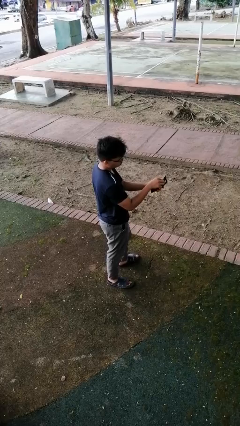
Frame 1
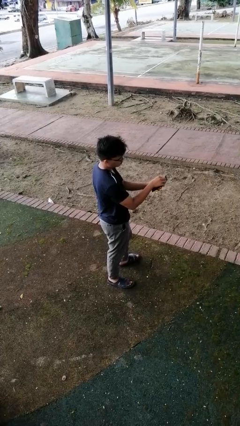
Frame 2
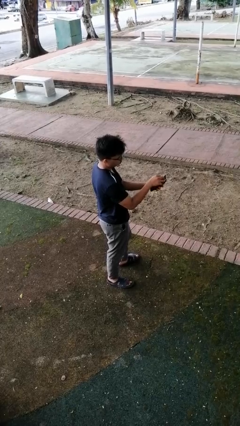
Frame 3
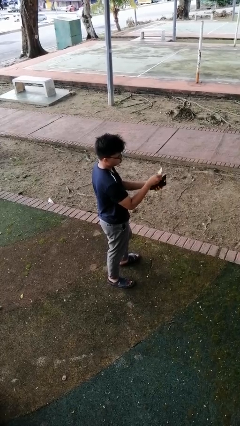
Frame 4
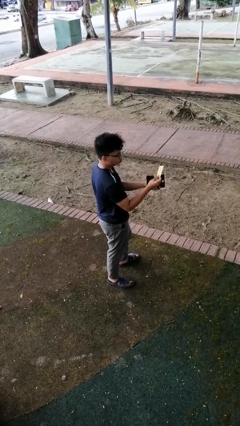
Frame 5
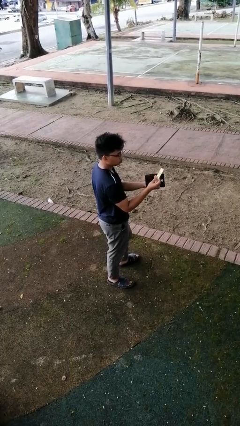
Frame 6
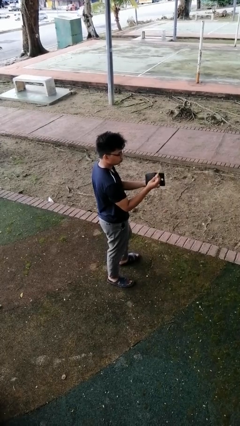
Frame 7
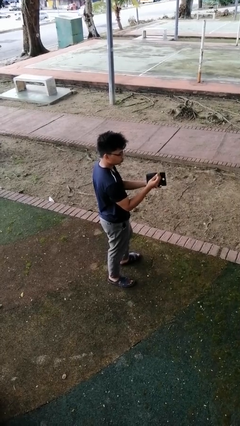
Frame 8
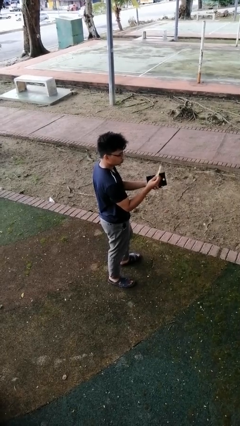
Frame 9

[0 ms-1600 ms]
person takes object from purse

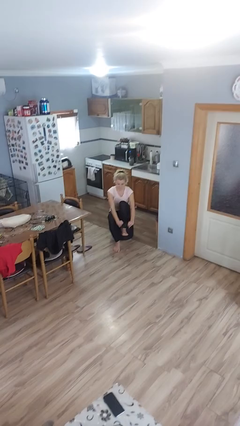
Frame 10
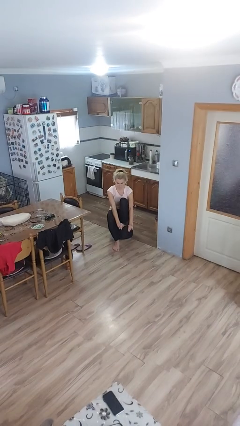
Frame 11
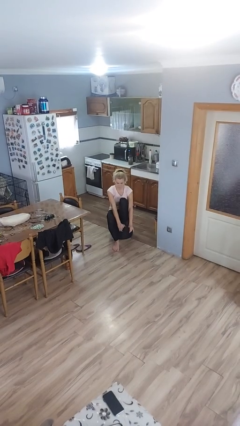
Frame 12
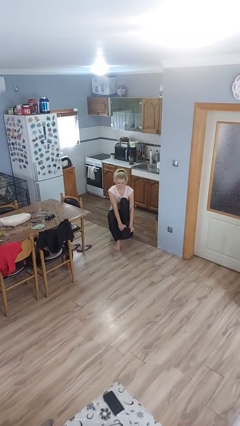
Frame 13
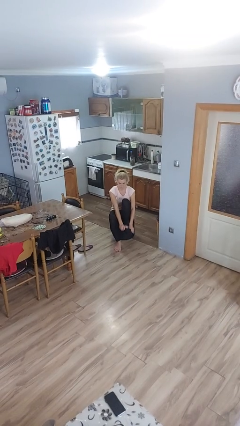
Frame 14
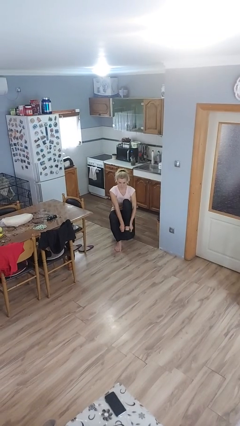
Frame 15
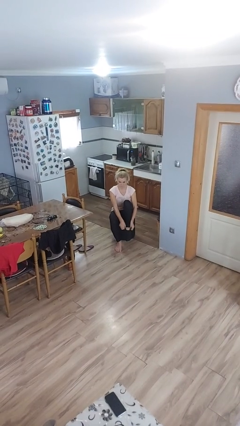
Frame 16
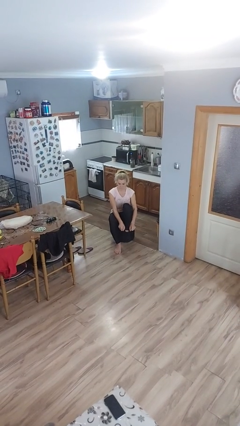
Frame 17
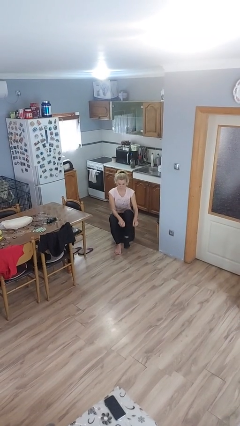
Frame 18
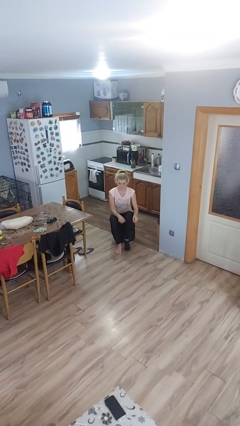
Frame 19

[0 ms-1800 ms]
person puts on socks

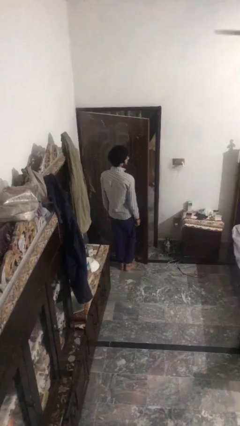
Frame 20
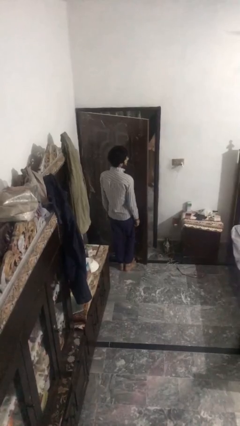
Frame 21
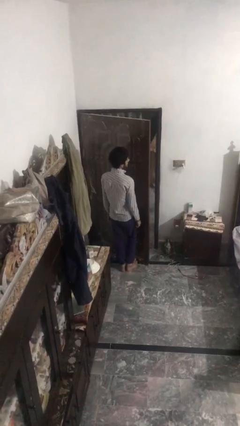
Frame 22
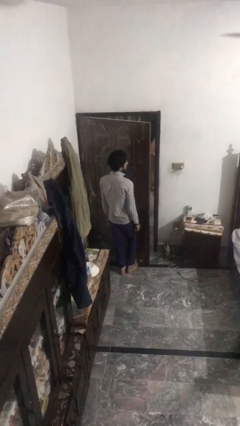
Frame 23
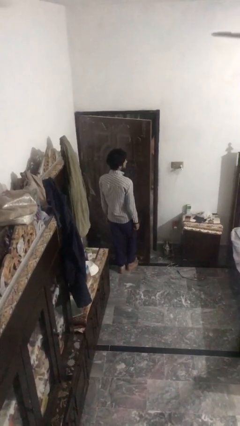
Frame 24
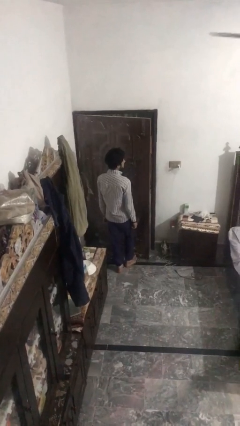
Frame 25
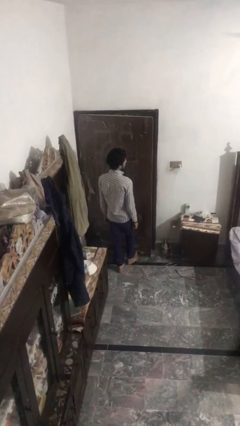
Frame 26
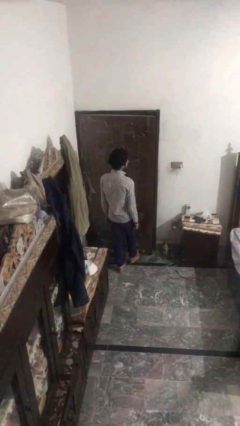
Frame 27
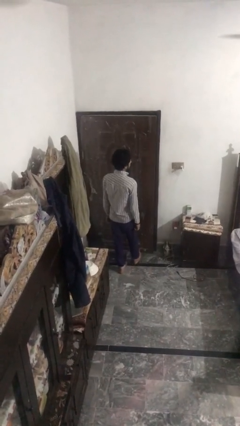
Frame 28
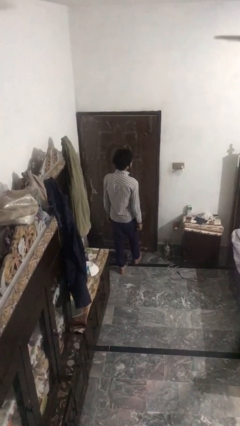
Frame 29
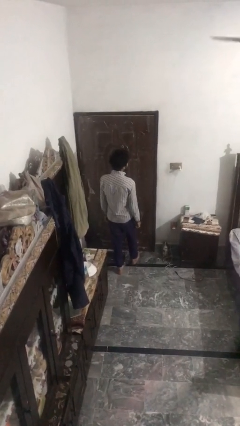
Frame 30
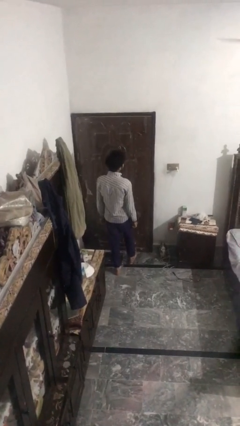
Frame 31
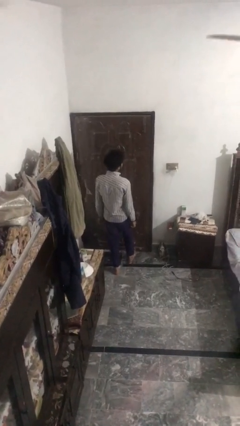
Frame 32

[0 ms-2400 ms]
person closes door with foot

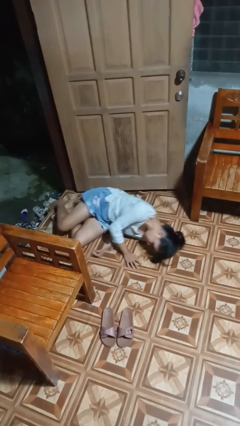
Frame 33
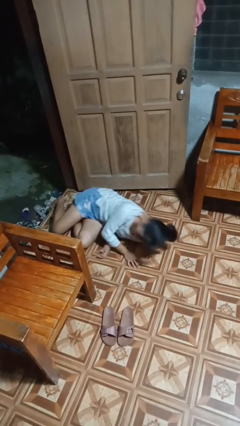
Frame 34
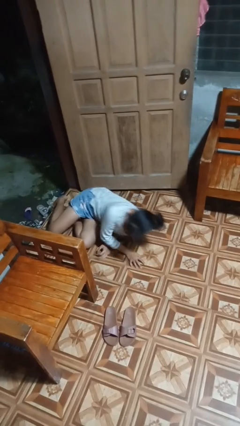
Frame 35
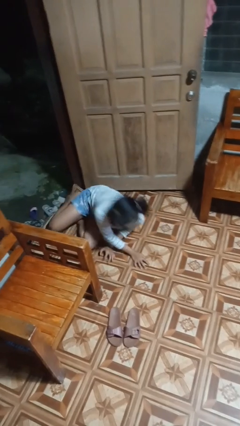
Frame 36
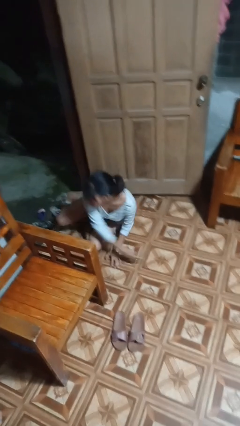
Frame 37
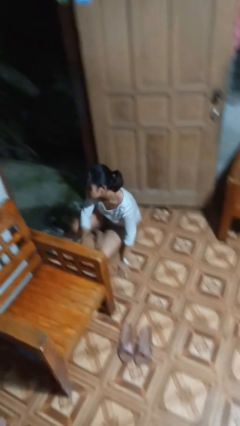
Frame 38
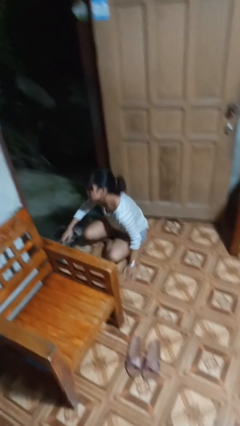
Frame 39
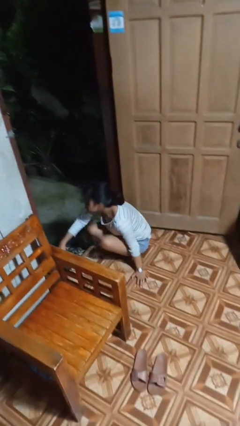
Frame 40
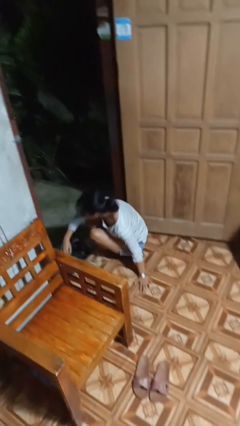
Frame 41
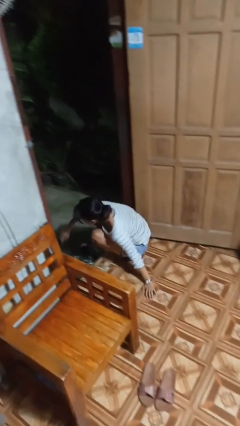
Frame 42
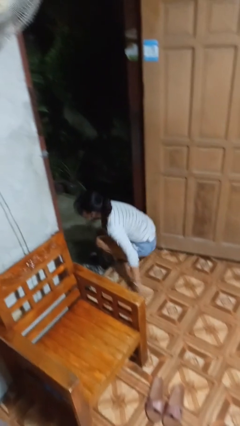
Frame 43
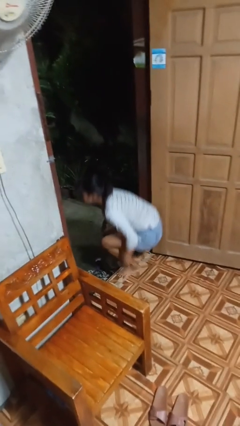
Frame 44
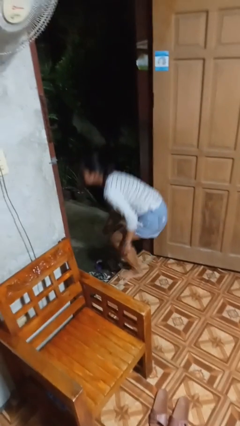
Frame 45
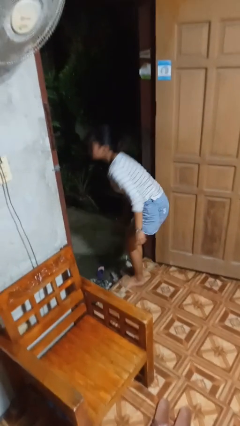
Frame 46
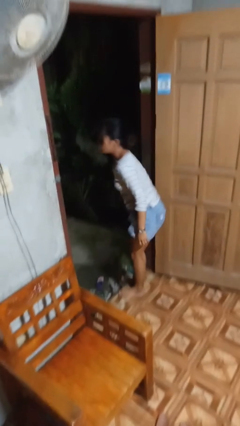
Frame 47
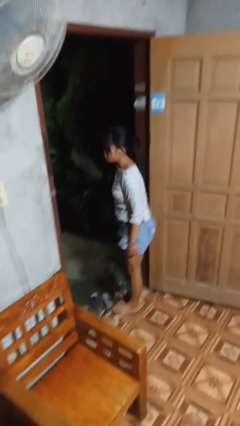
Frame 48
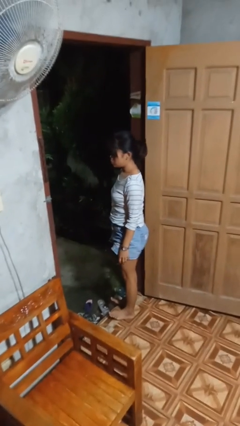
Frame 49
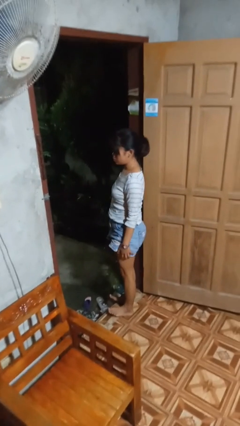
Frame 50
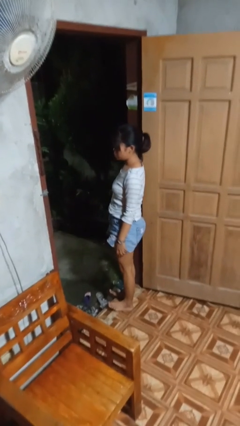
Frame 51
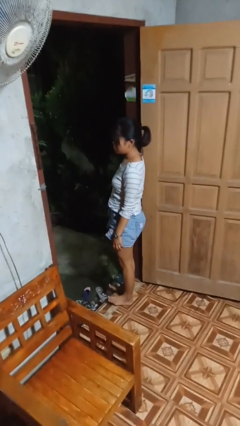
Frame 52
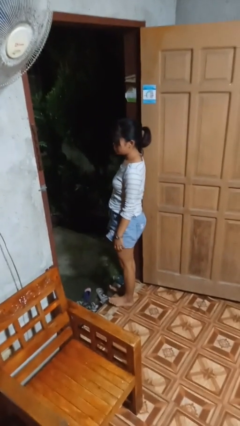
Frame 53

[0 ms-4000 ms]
person stands up from floor

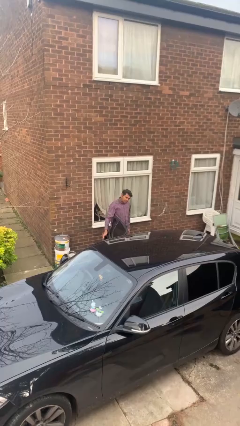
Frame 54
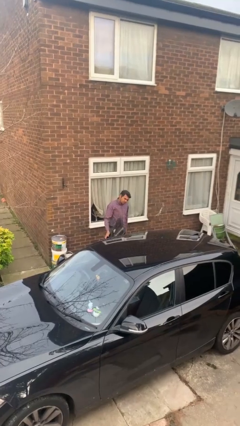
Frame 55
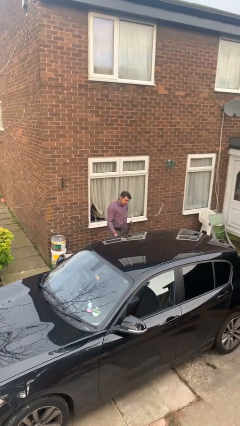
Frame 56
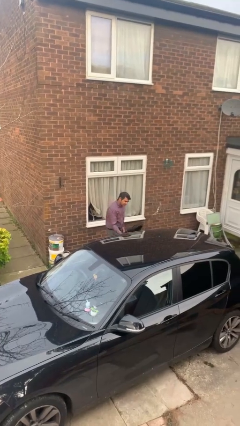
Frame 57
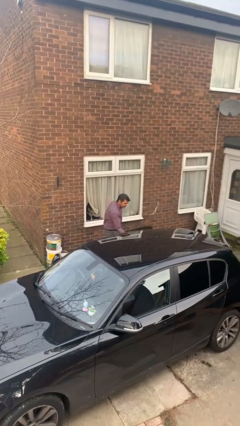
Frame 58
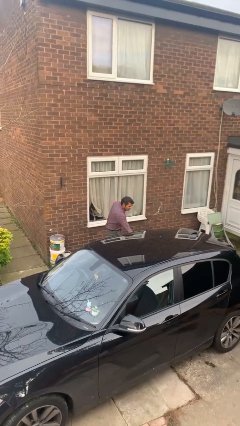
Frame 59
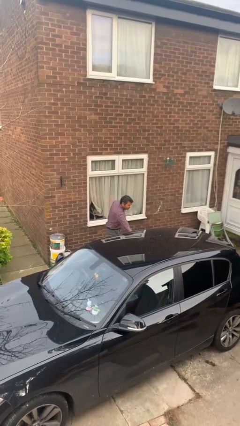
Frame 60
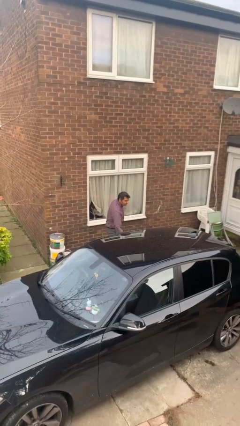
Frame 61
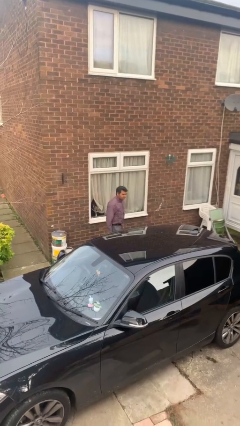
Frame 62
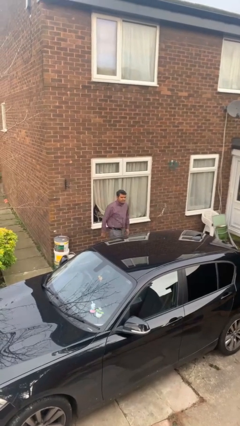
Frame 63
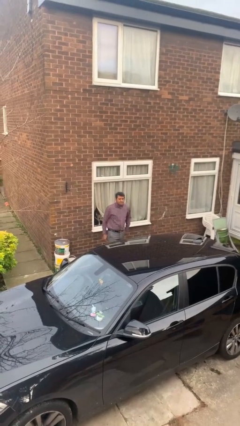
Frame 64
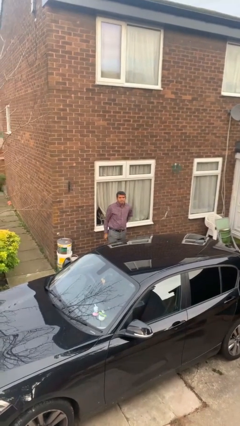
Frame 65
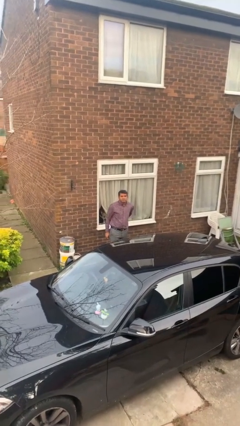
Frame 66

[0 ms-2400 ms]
person closes car door

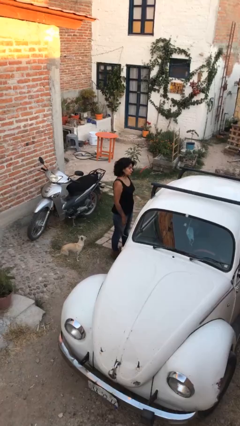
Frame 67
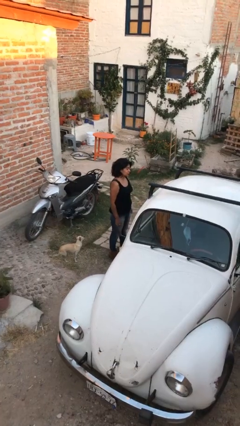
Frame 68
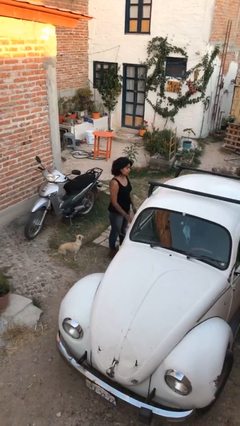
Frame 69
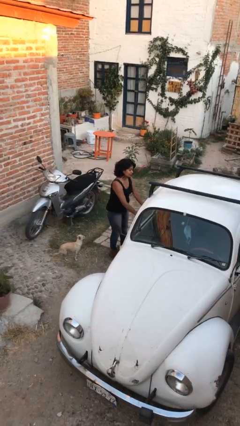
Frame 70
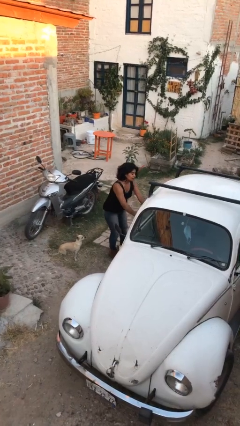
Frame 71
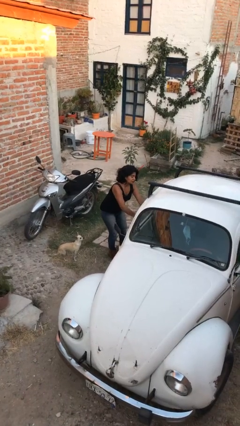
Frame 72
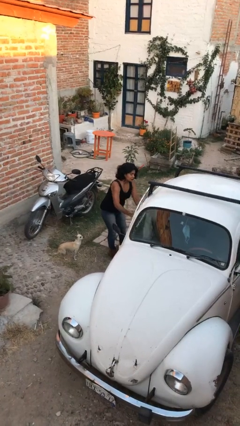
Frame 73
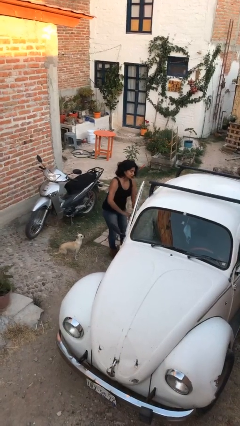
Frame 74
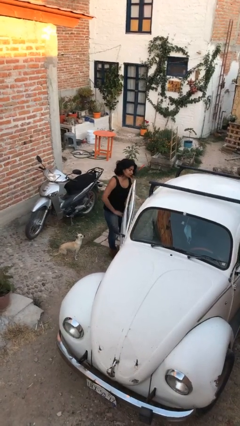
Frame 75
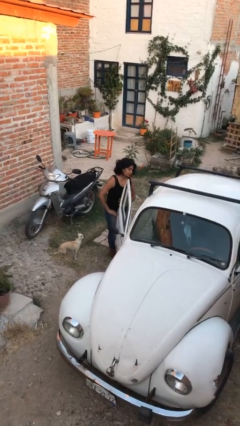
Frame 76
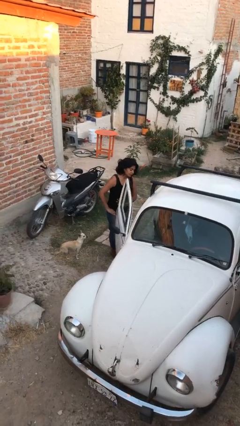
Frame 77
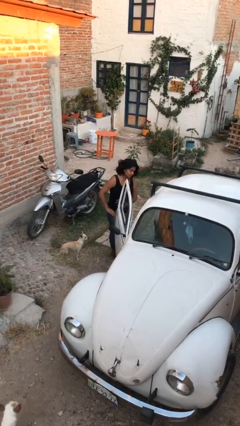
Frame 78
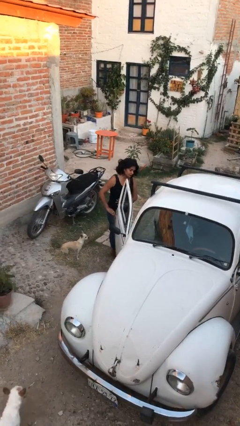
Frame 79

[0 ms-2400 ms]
person opens car door

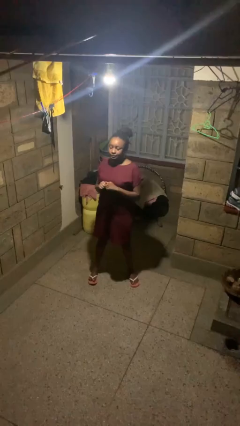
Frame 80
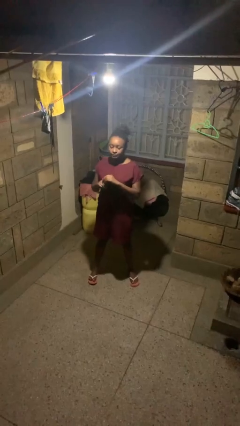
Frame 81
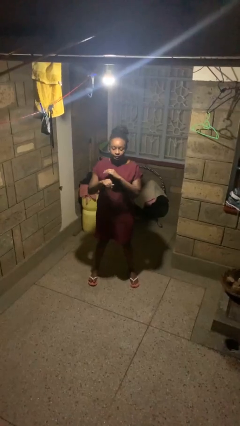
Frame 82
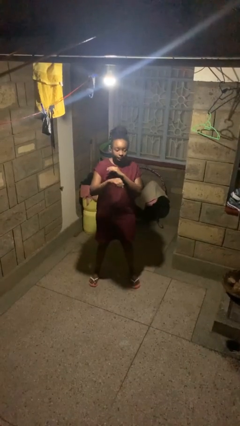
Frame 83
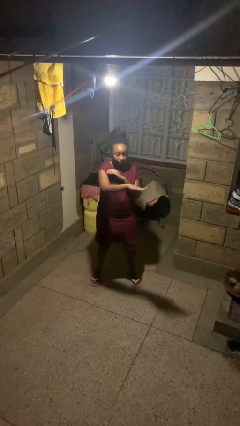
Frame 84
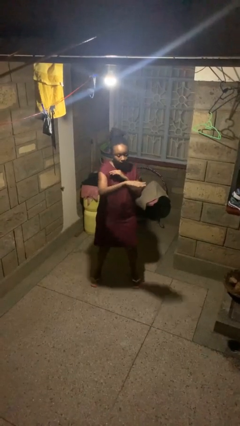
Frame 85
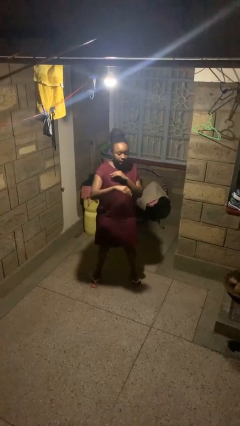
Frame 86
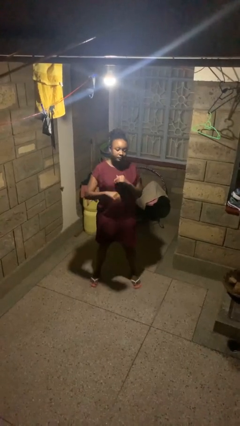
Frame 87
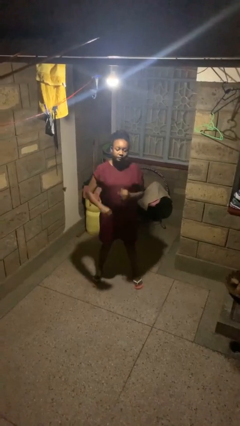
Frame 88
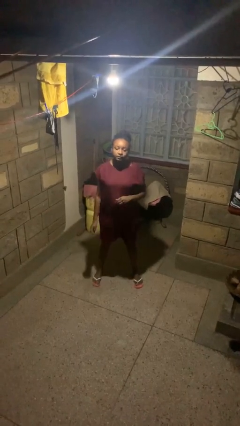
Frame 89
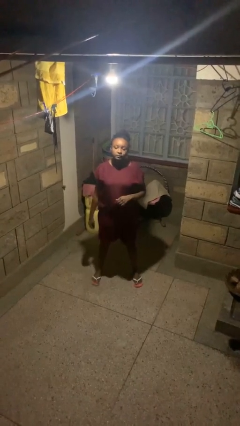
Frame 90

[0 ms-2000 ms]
person karate chop

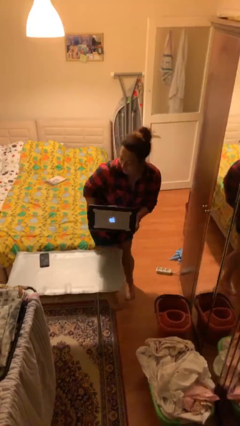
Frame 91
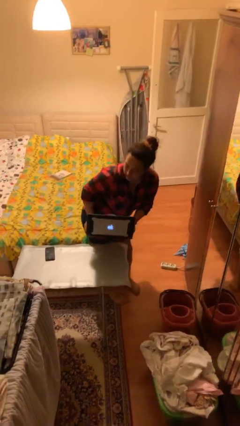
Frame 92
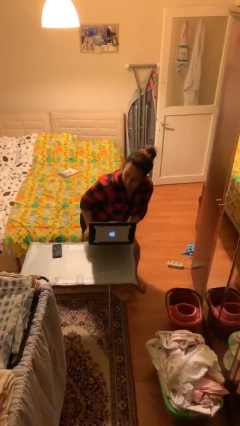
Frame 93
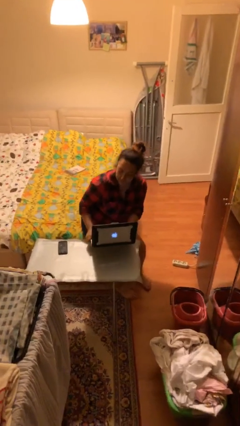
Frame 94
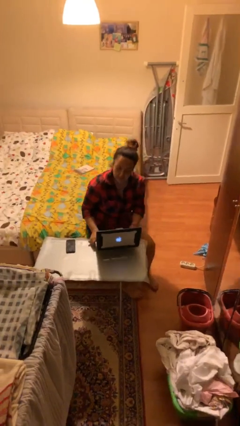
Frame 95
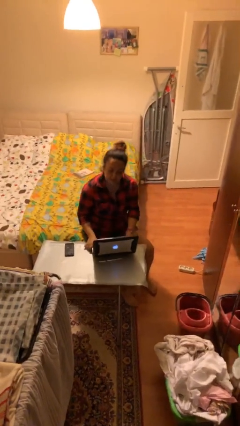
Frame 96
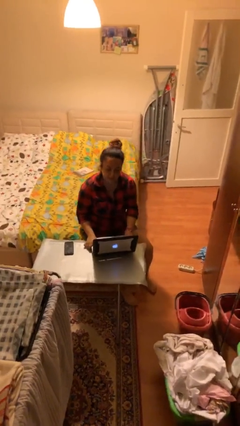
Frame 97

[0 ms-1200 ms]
person sits down
